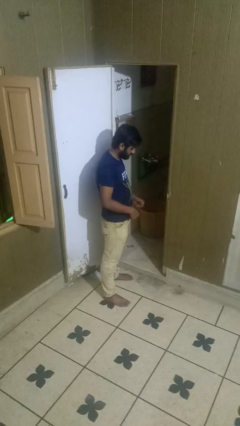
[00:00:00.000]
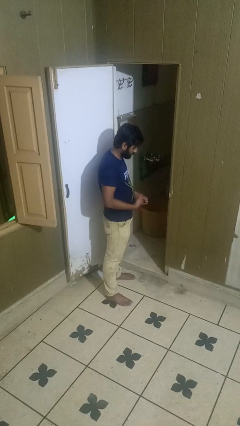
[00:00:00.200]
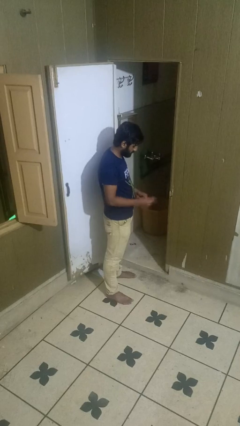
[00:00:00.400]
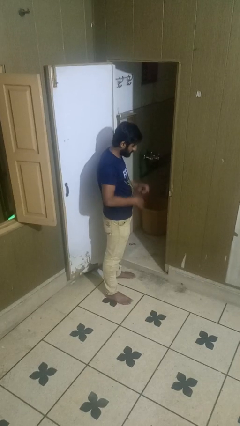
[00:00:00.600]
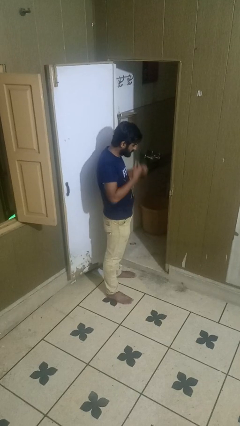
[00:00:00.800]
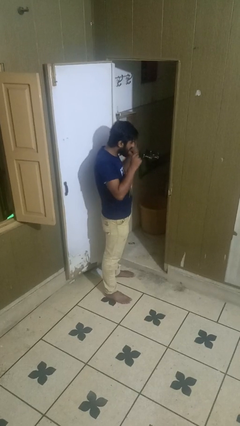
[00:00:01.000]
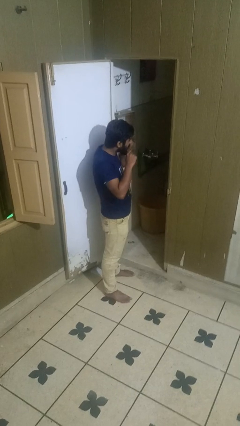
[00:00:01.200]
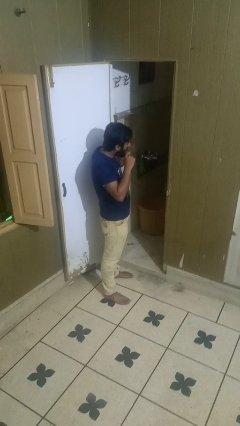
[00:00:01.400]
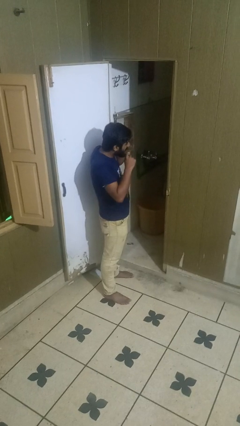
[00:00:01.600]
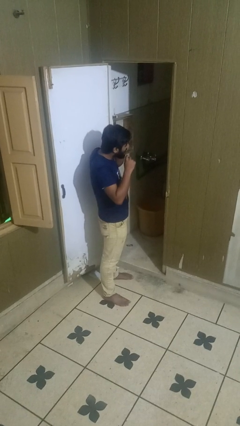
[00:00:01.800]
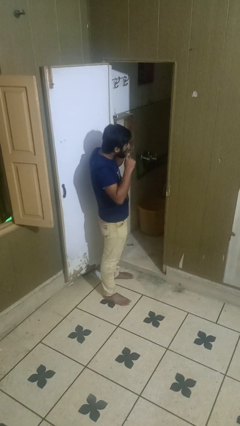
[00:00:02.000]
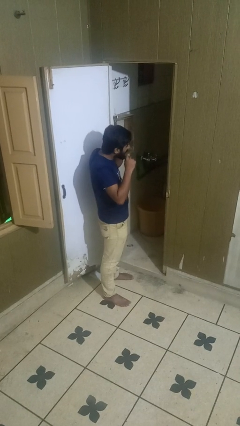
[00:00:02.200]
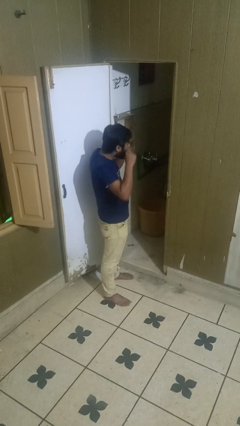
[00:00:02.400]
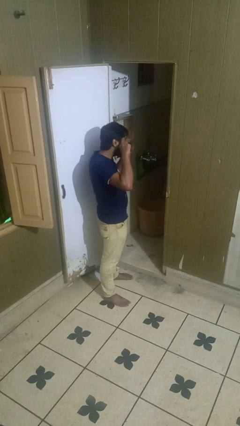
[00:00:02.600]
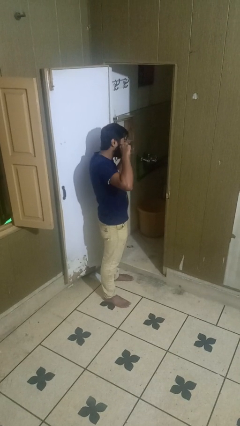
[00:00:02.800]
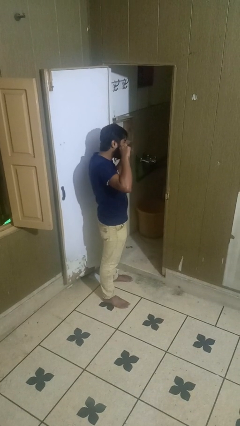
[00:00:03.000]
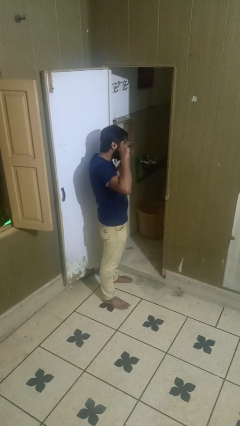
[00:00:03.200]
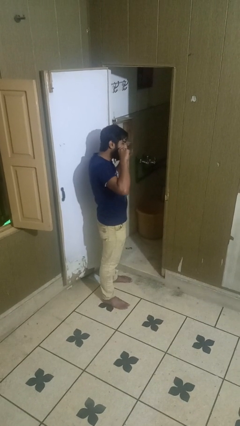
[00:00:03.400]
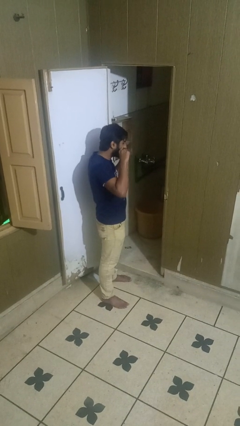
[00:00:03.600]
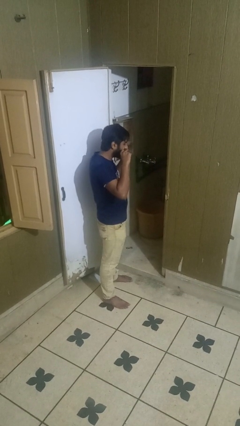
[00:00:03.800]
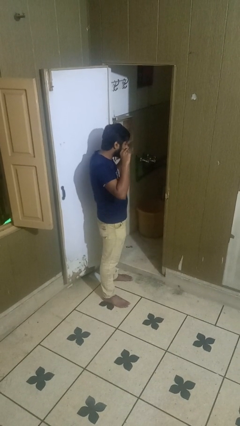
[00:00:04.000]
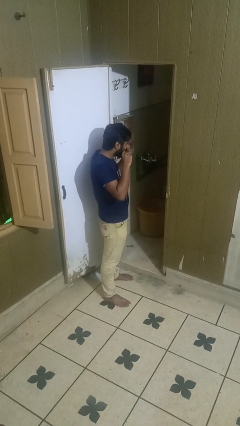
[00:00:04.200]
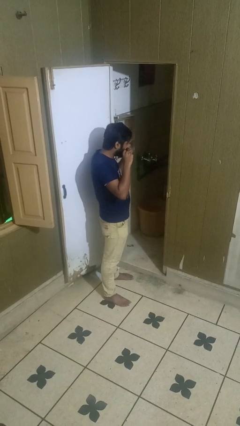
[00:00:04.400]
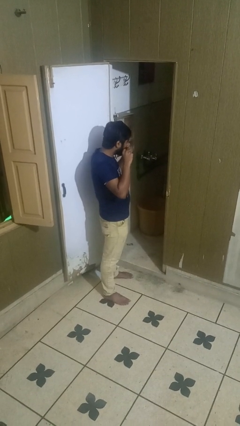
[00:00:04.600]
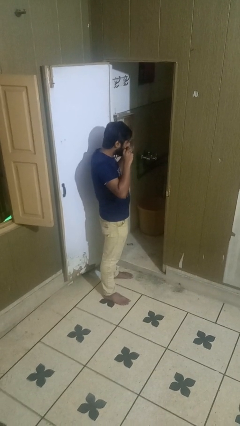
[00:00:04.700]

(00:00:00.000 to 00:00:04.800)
person flosses

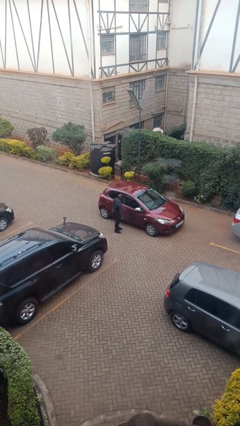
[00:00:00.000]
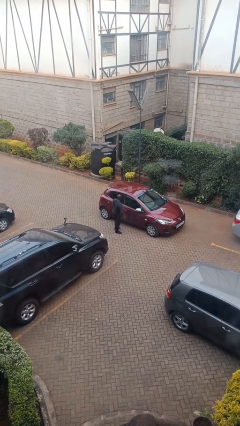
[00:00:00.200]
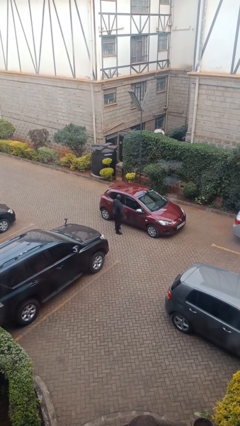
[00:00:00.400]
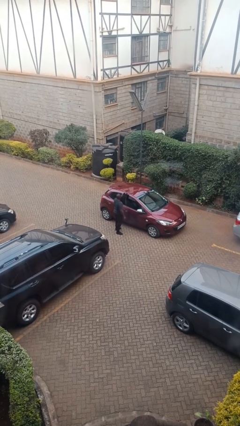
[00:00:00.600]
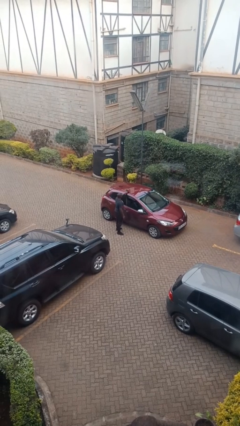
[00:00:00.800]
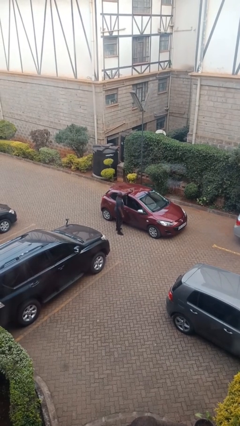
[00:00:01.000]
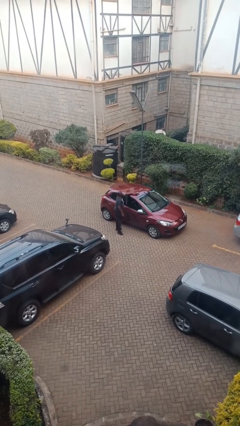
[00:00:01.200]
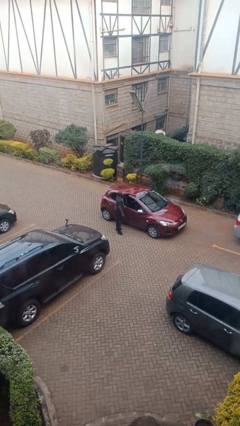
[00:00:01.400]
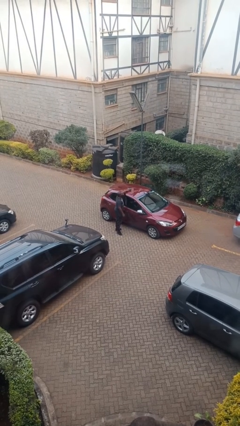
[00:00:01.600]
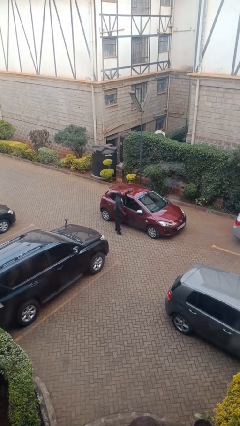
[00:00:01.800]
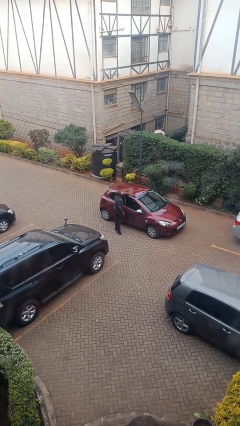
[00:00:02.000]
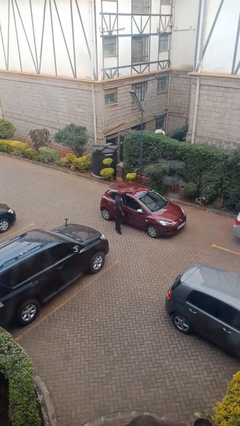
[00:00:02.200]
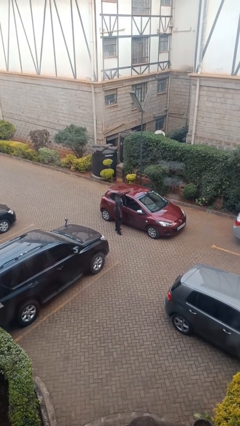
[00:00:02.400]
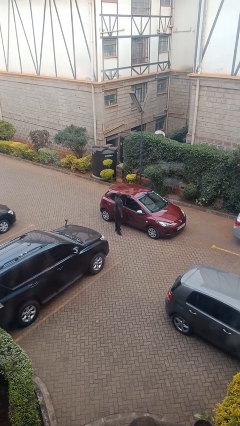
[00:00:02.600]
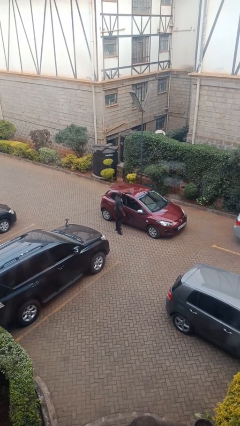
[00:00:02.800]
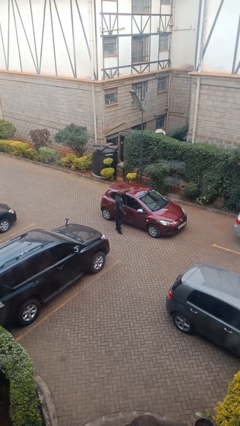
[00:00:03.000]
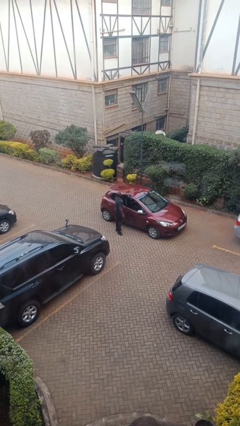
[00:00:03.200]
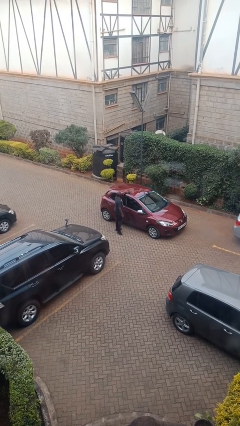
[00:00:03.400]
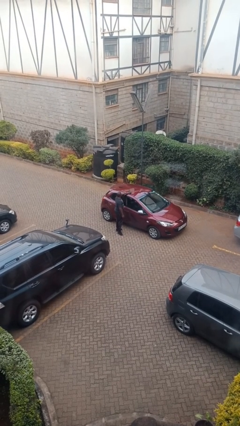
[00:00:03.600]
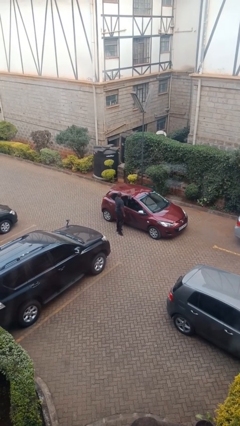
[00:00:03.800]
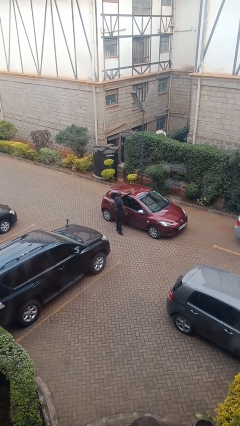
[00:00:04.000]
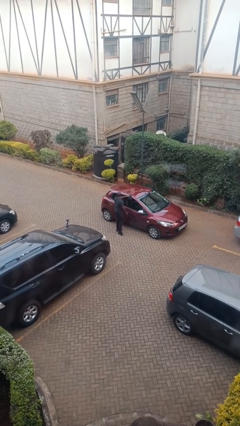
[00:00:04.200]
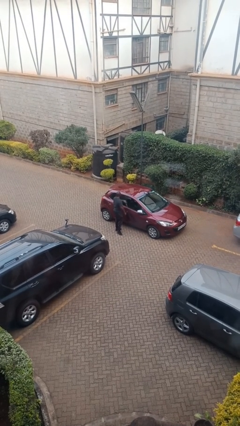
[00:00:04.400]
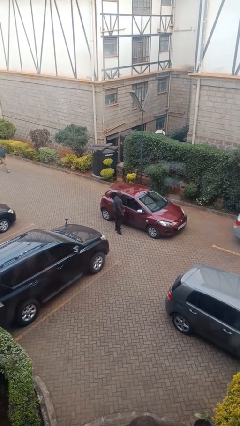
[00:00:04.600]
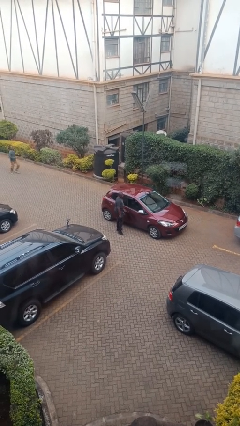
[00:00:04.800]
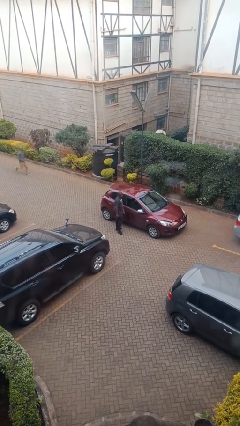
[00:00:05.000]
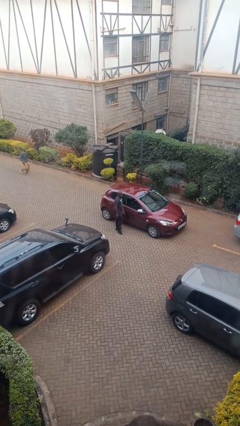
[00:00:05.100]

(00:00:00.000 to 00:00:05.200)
person polishes car with rag

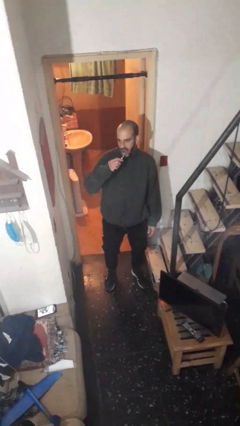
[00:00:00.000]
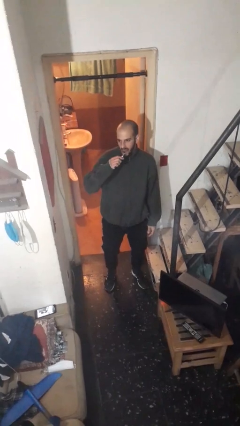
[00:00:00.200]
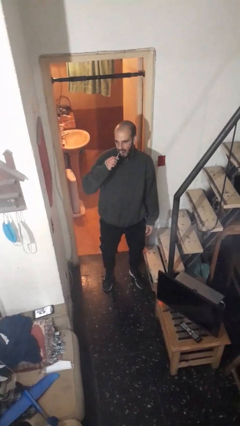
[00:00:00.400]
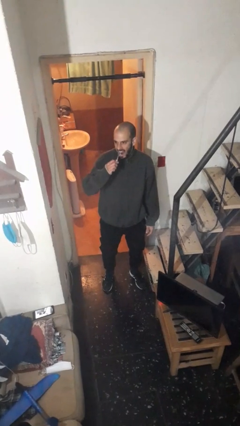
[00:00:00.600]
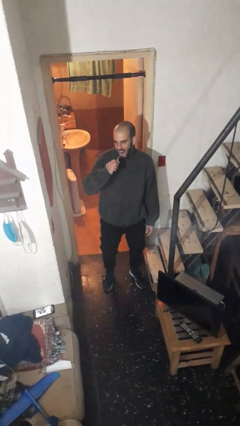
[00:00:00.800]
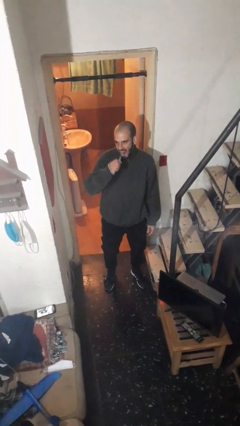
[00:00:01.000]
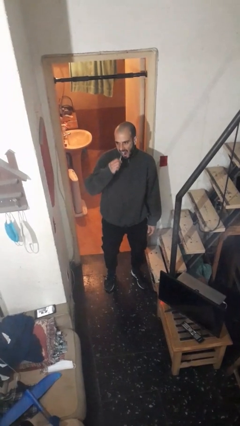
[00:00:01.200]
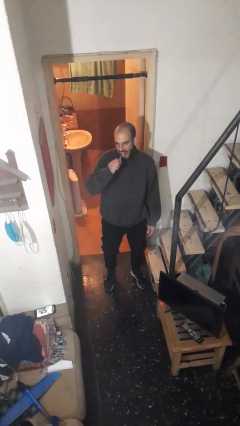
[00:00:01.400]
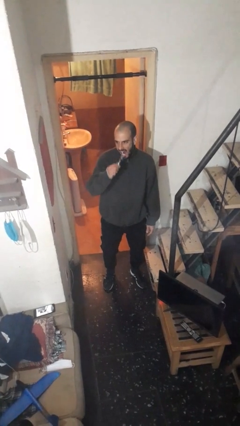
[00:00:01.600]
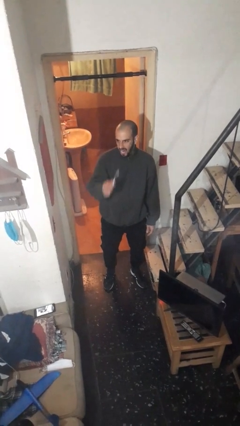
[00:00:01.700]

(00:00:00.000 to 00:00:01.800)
person brushes teeth

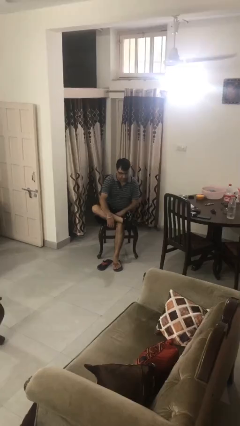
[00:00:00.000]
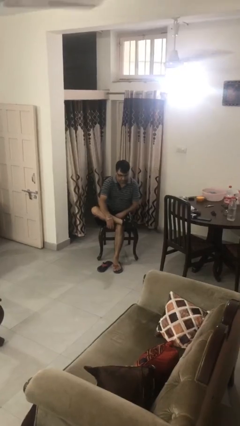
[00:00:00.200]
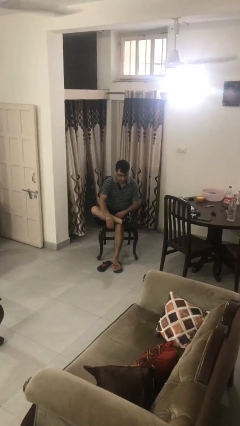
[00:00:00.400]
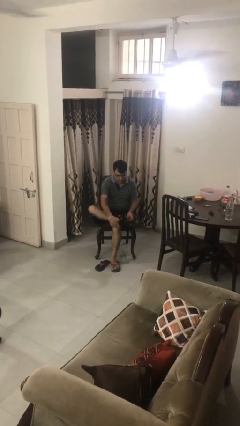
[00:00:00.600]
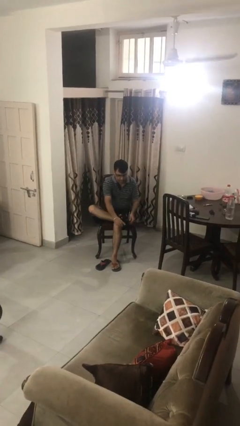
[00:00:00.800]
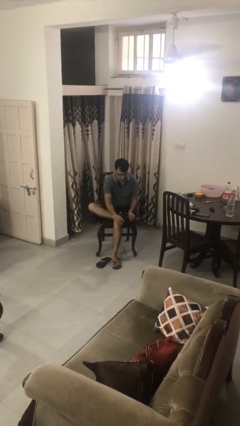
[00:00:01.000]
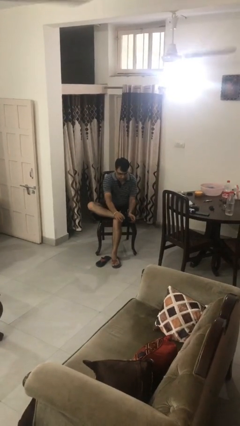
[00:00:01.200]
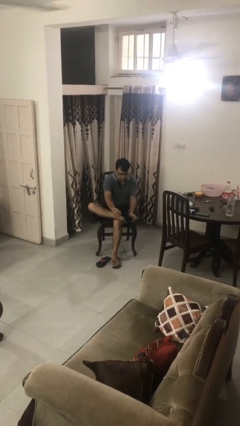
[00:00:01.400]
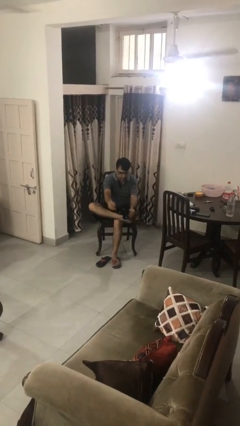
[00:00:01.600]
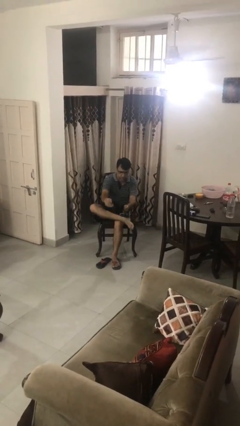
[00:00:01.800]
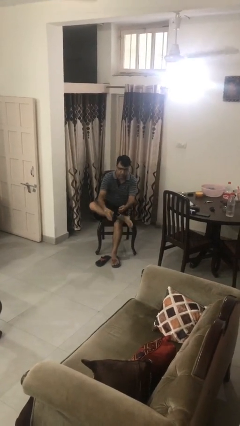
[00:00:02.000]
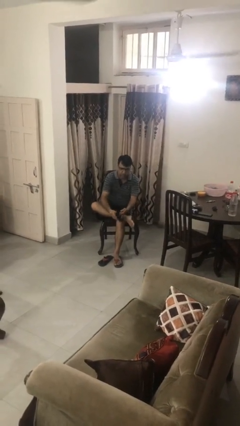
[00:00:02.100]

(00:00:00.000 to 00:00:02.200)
person takes off socks

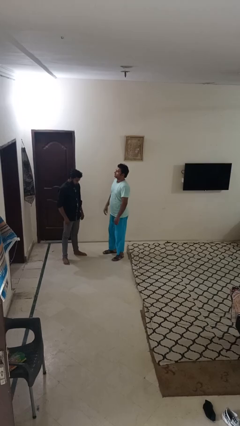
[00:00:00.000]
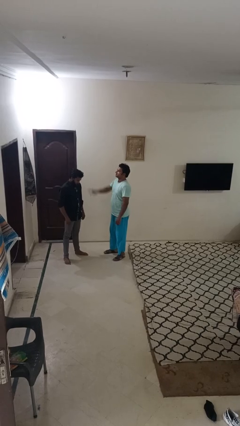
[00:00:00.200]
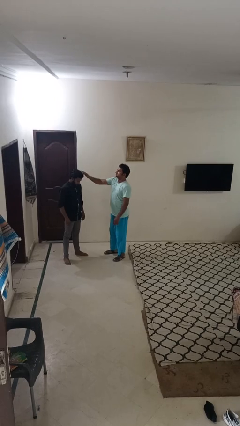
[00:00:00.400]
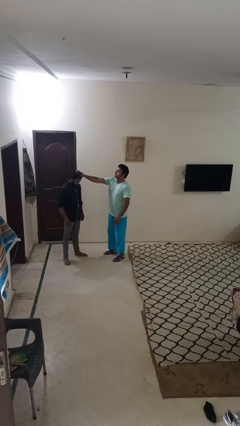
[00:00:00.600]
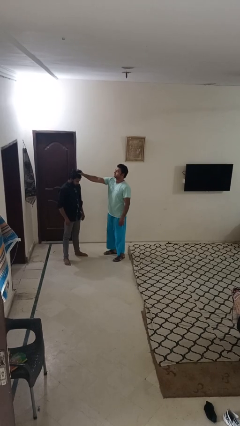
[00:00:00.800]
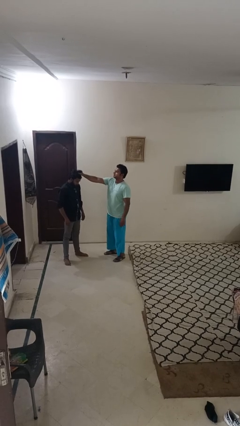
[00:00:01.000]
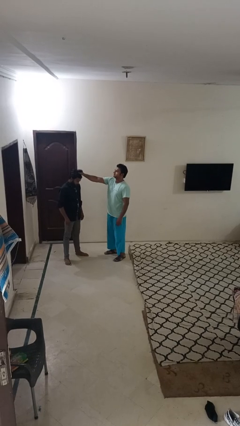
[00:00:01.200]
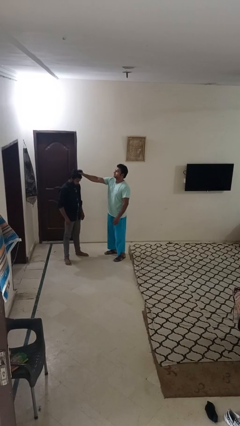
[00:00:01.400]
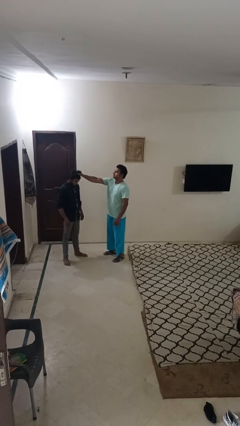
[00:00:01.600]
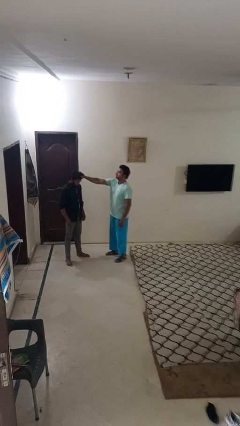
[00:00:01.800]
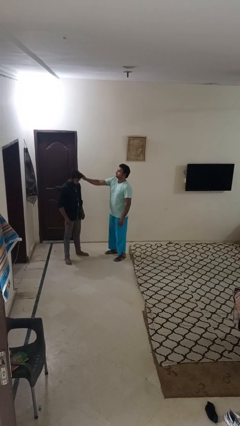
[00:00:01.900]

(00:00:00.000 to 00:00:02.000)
person grabs person by hair

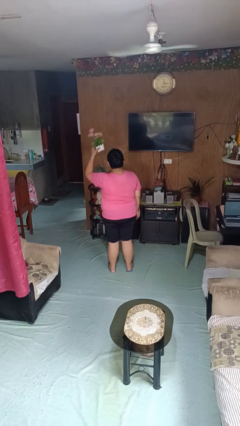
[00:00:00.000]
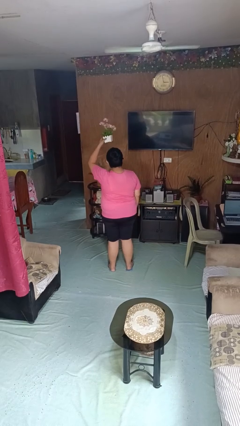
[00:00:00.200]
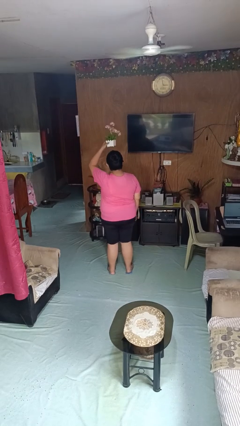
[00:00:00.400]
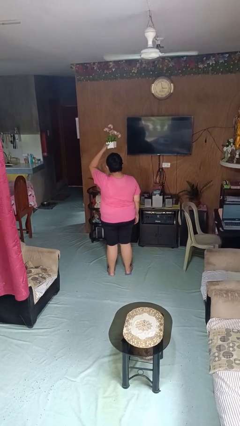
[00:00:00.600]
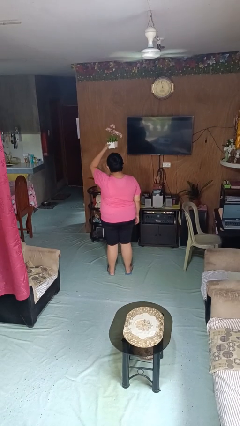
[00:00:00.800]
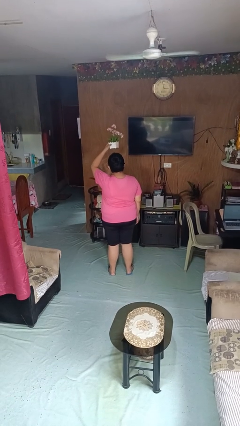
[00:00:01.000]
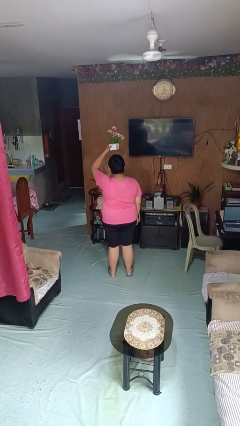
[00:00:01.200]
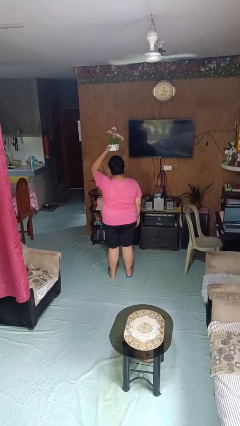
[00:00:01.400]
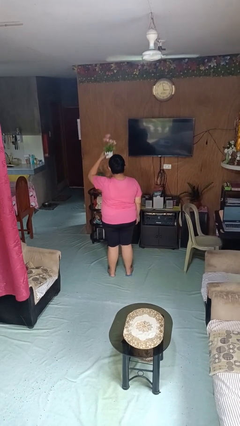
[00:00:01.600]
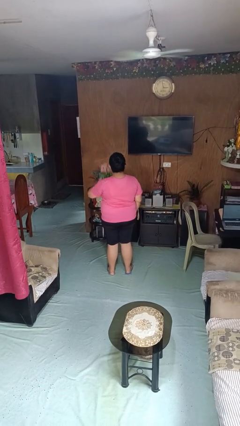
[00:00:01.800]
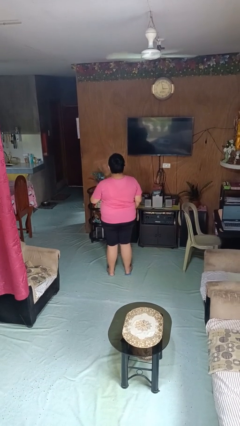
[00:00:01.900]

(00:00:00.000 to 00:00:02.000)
person holds object above head
